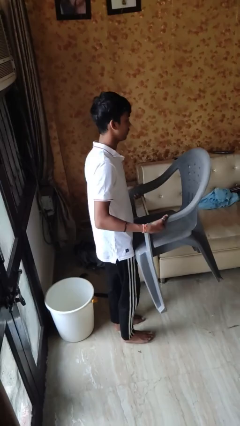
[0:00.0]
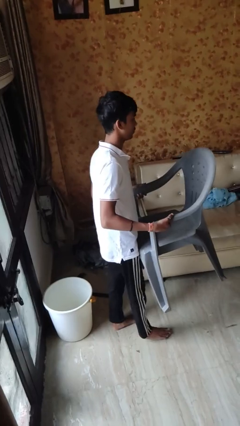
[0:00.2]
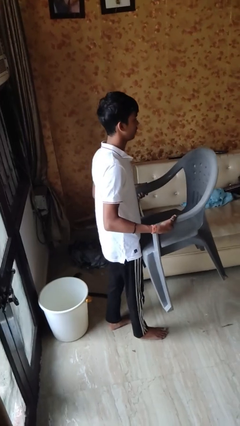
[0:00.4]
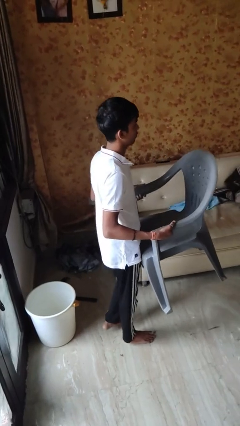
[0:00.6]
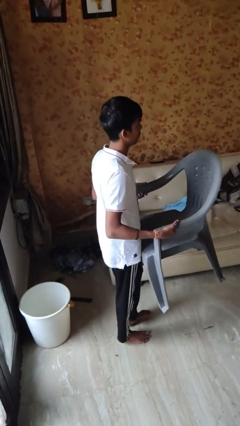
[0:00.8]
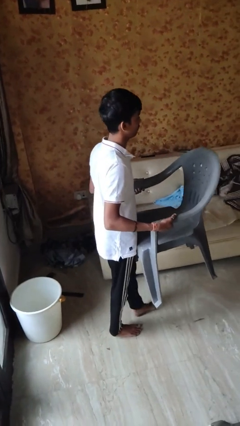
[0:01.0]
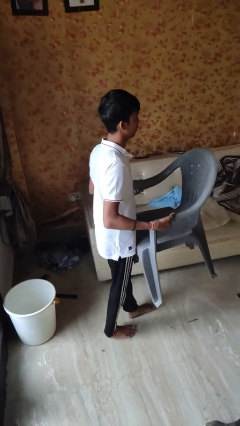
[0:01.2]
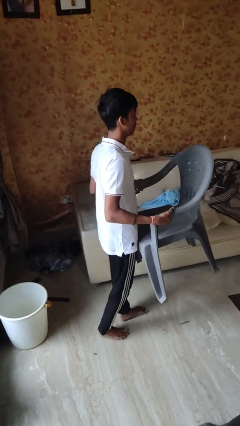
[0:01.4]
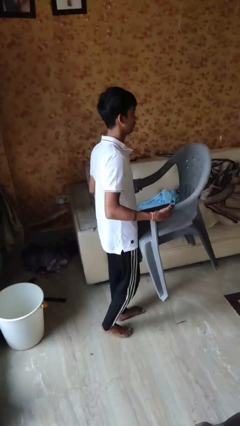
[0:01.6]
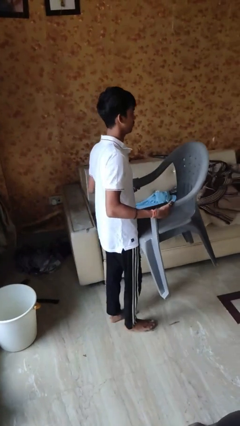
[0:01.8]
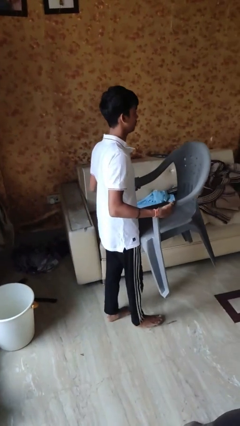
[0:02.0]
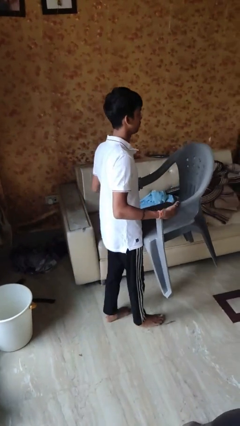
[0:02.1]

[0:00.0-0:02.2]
person carries furniture

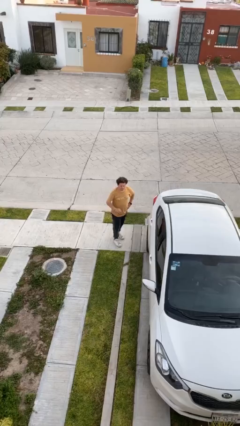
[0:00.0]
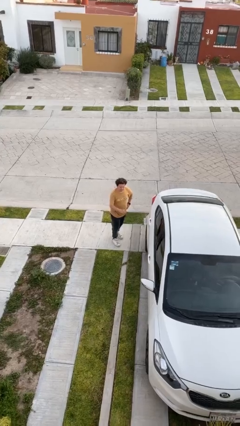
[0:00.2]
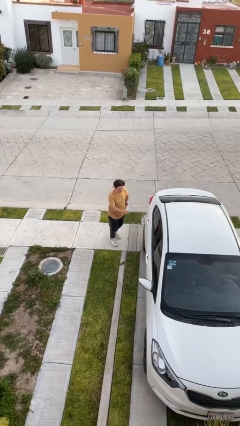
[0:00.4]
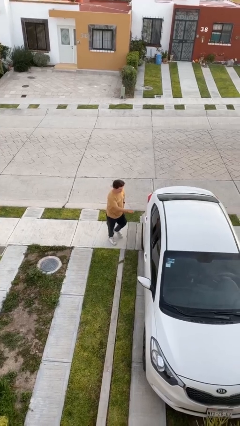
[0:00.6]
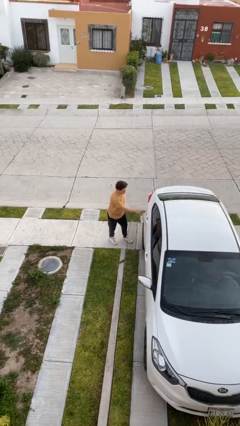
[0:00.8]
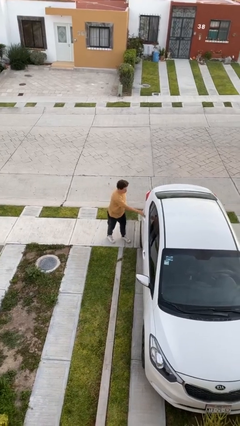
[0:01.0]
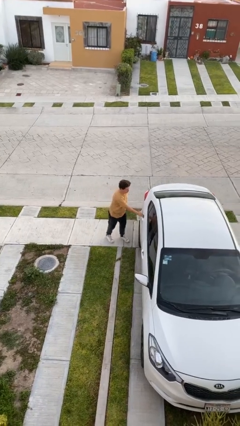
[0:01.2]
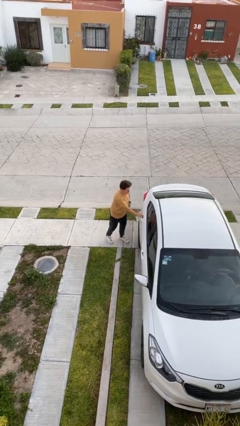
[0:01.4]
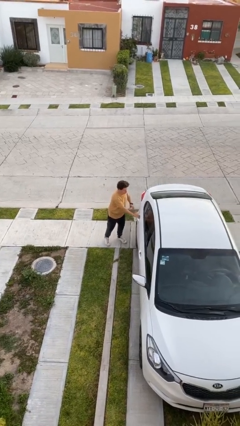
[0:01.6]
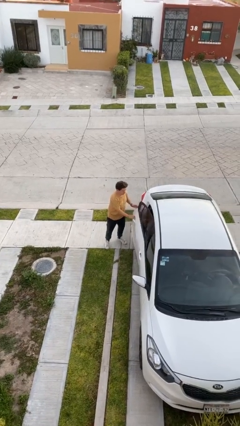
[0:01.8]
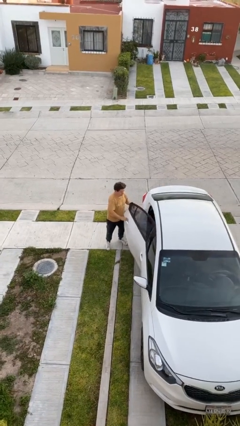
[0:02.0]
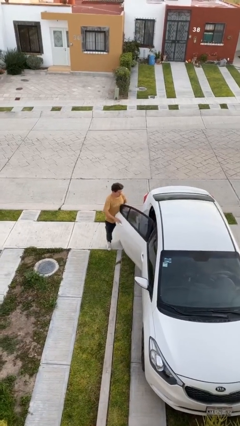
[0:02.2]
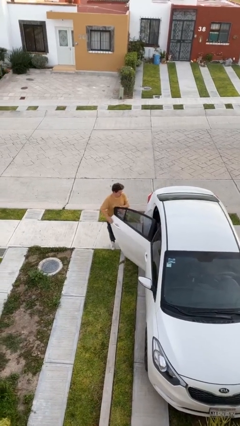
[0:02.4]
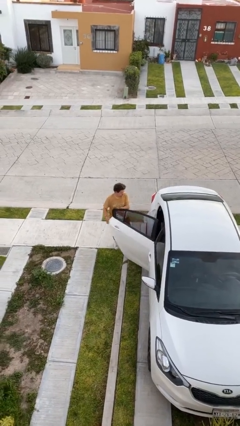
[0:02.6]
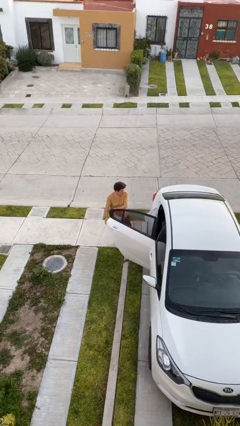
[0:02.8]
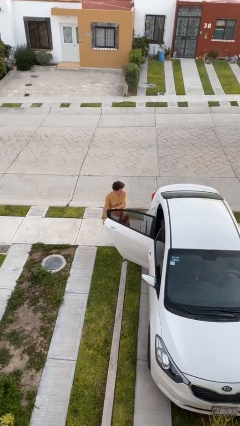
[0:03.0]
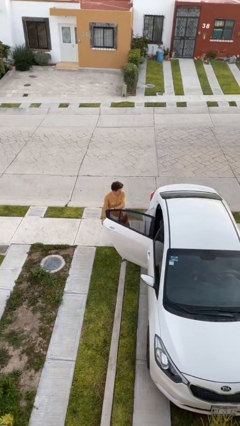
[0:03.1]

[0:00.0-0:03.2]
person opens car door

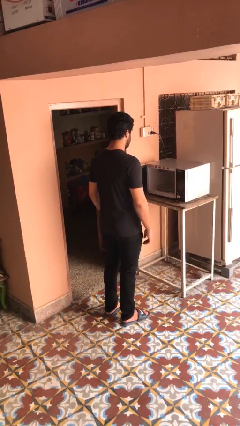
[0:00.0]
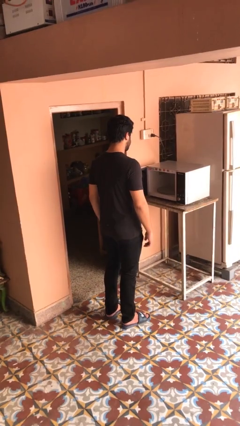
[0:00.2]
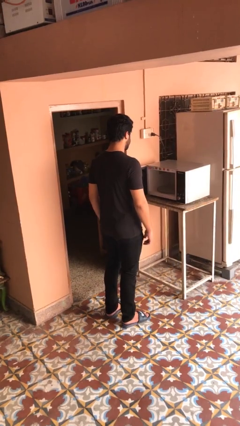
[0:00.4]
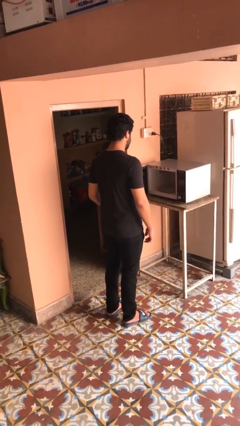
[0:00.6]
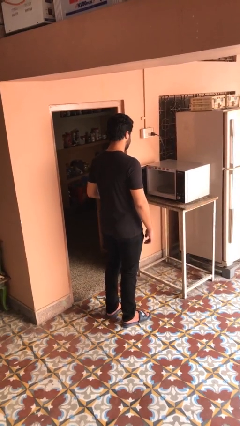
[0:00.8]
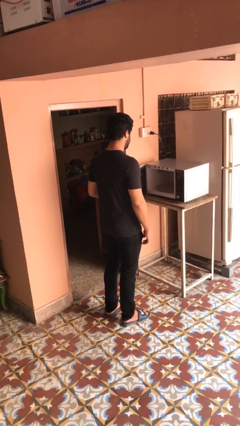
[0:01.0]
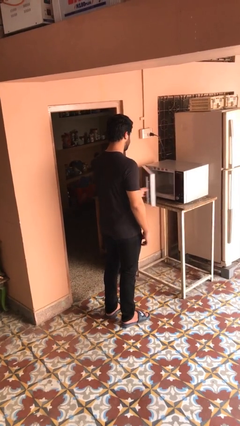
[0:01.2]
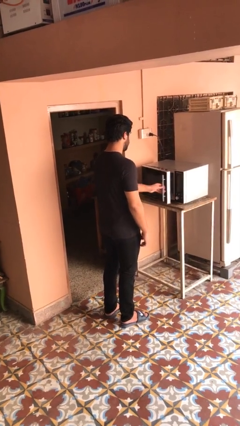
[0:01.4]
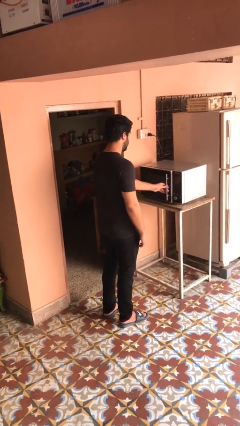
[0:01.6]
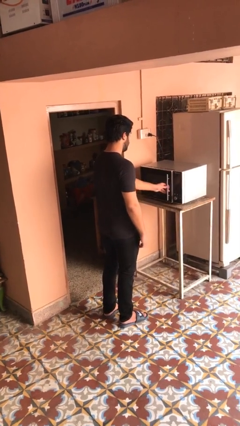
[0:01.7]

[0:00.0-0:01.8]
person closes microwave

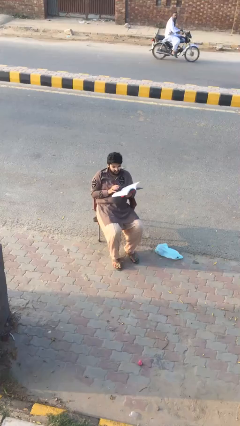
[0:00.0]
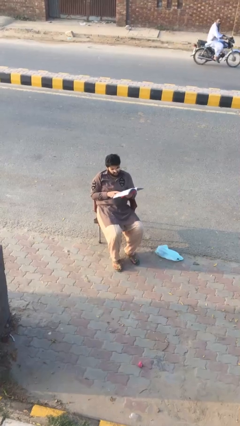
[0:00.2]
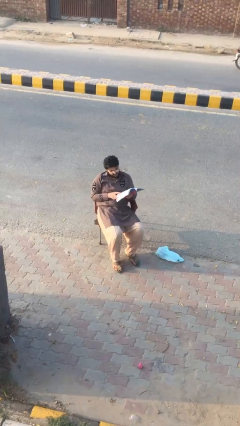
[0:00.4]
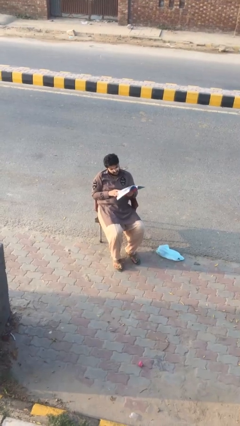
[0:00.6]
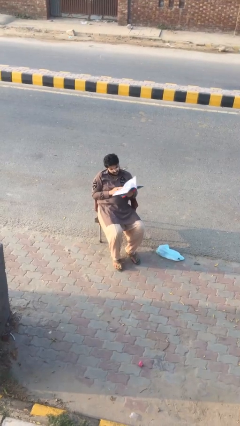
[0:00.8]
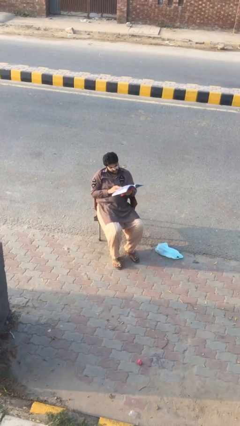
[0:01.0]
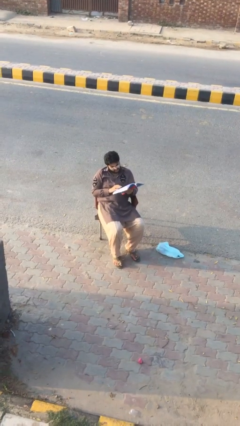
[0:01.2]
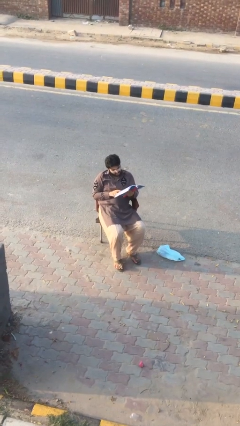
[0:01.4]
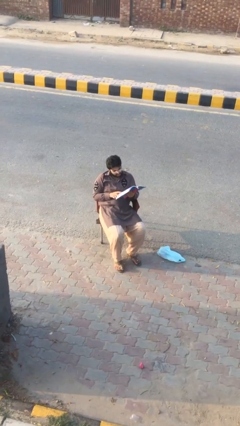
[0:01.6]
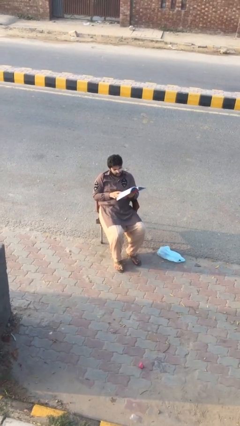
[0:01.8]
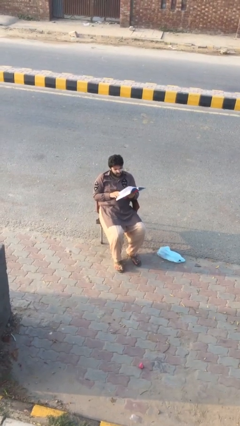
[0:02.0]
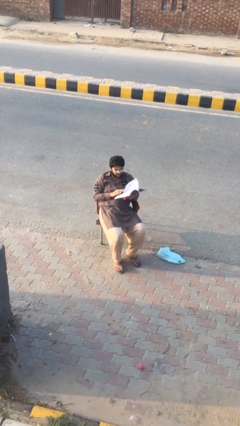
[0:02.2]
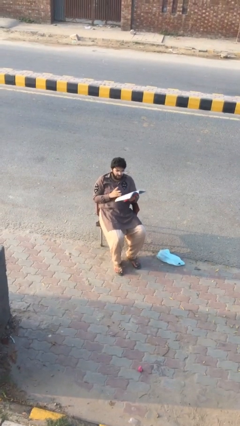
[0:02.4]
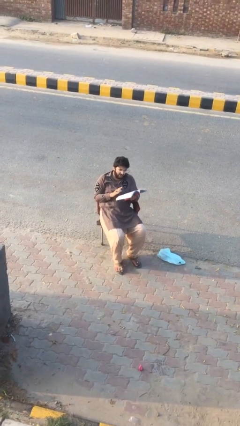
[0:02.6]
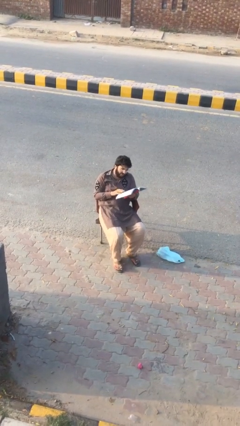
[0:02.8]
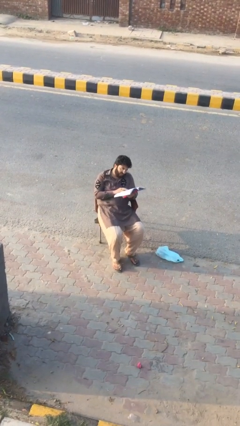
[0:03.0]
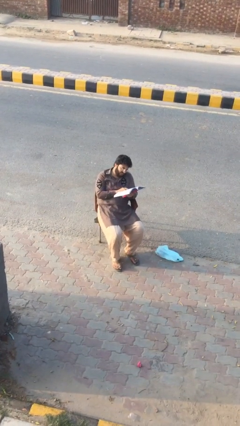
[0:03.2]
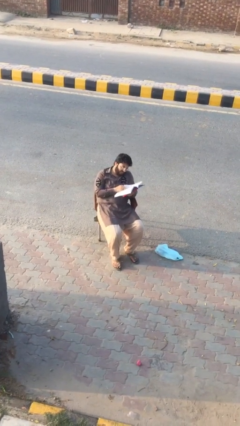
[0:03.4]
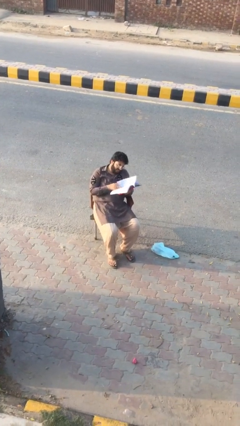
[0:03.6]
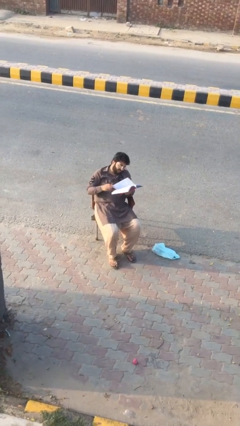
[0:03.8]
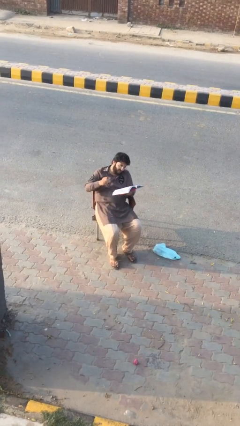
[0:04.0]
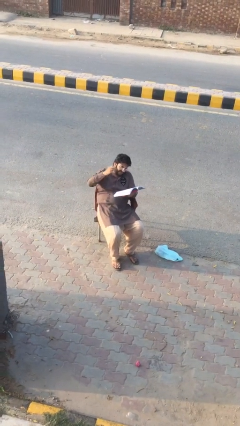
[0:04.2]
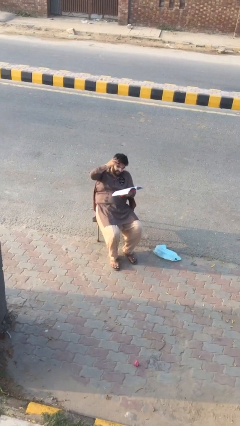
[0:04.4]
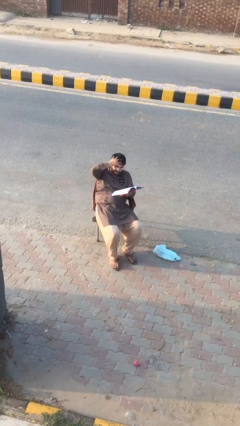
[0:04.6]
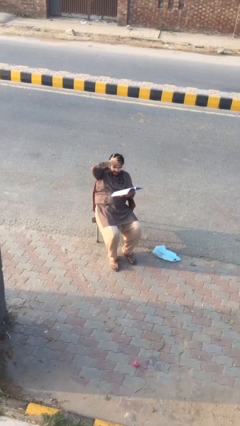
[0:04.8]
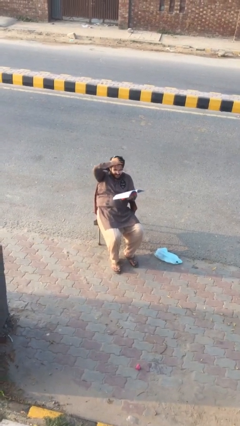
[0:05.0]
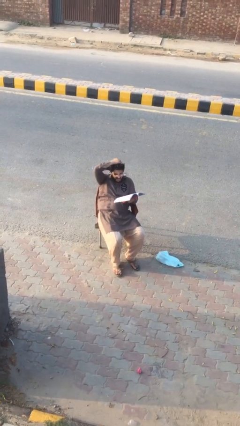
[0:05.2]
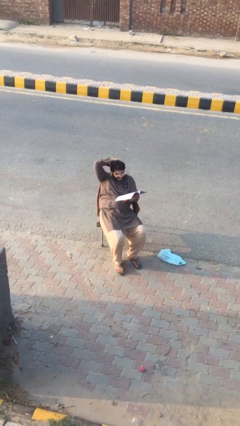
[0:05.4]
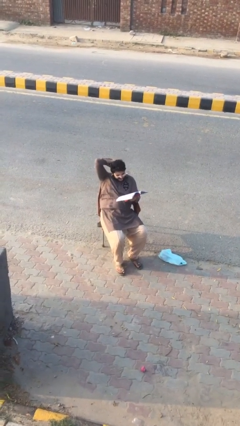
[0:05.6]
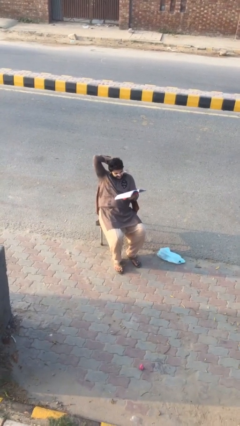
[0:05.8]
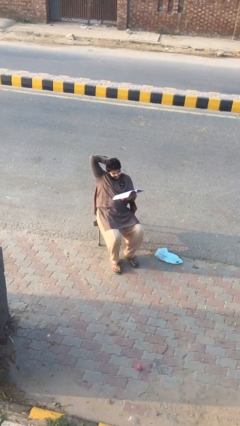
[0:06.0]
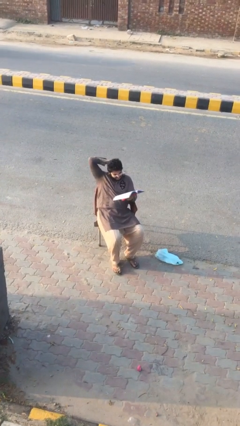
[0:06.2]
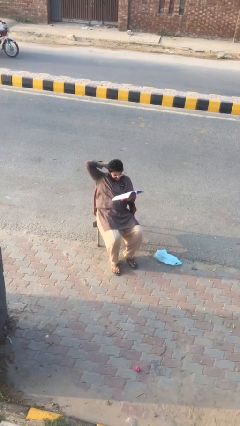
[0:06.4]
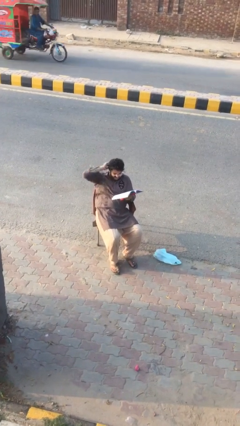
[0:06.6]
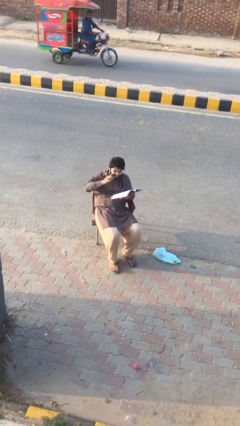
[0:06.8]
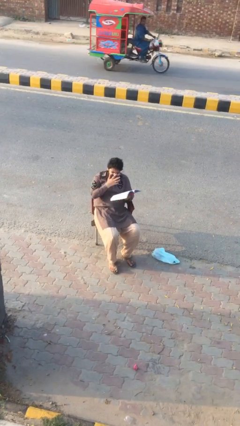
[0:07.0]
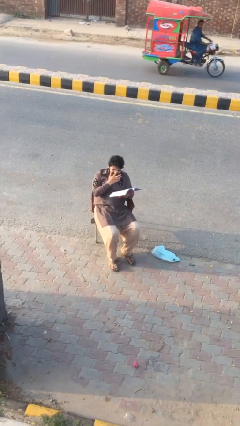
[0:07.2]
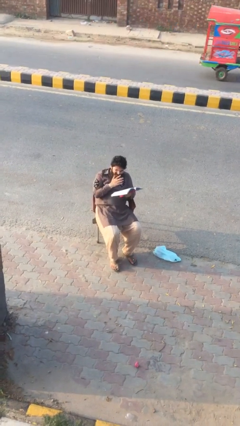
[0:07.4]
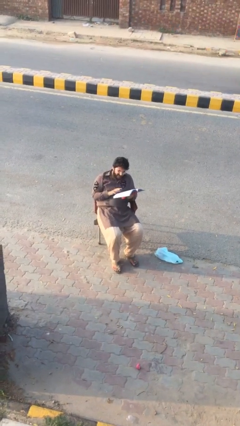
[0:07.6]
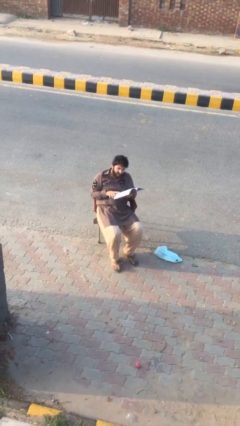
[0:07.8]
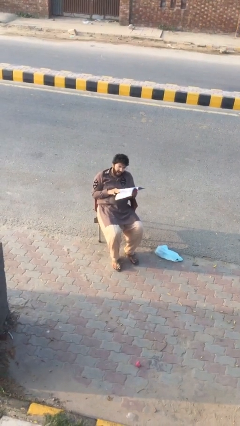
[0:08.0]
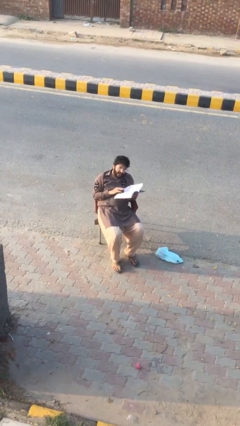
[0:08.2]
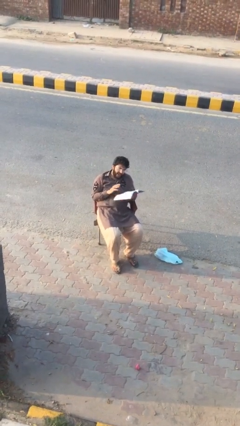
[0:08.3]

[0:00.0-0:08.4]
person reads document

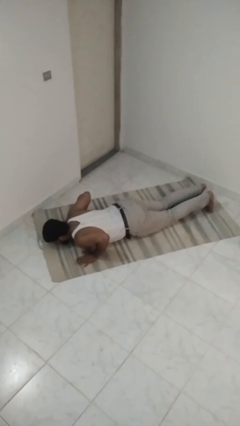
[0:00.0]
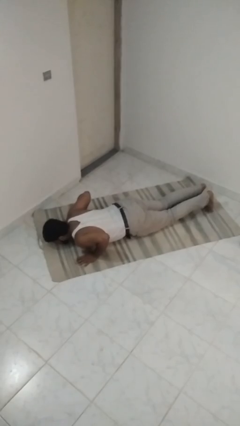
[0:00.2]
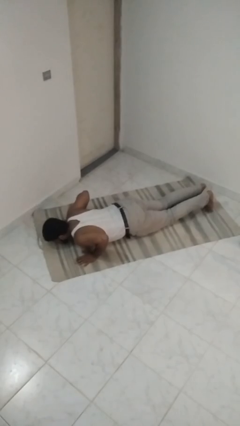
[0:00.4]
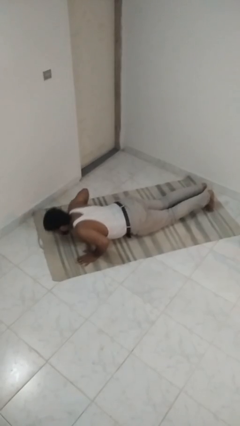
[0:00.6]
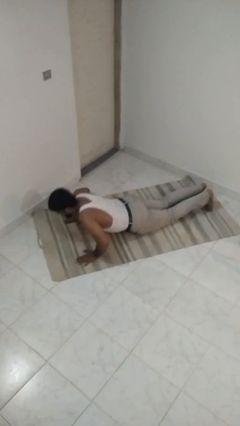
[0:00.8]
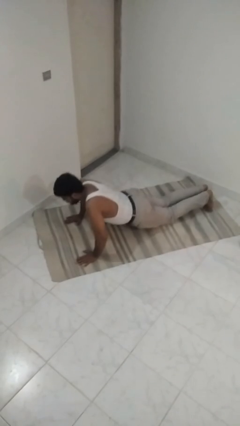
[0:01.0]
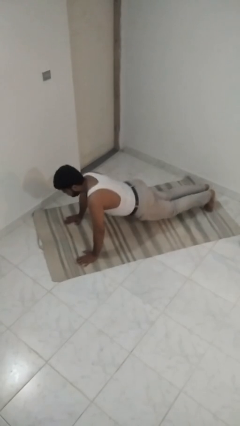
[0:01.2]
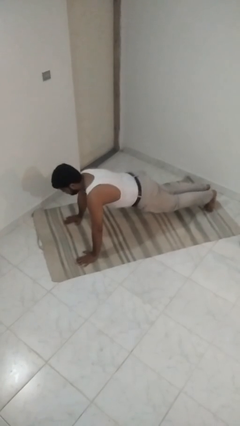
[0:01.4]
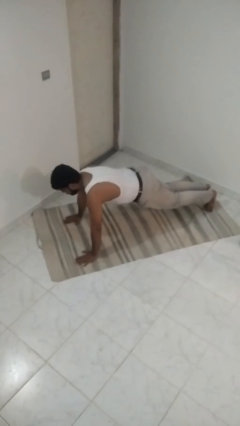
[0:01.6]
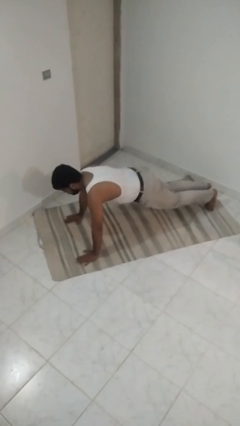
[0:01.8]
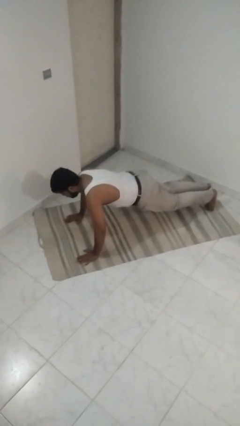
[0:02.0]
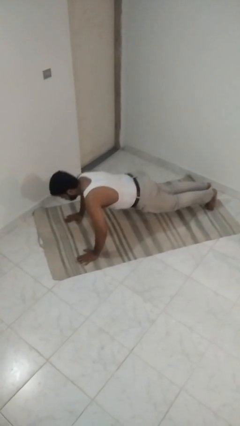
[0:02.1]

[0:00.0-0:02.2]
person exercises with pushup
